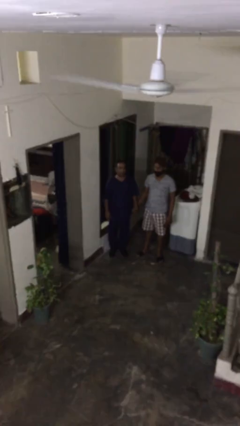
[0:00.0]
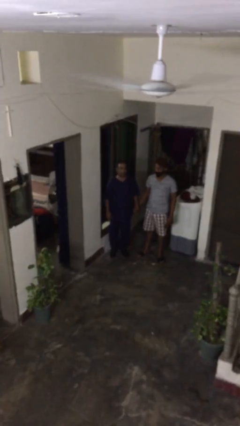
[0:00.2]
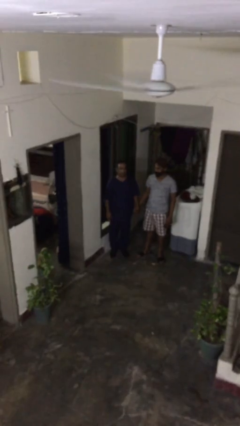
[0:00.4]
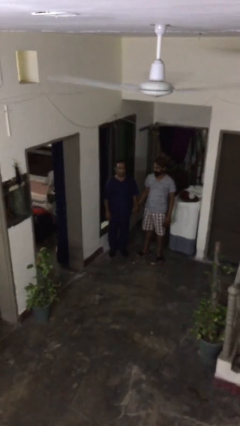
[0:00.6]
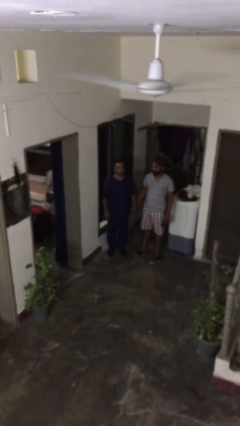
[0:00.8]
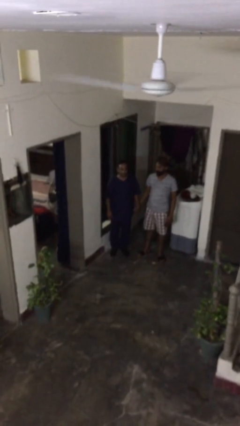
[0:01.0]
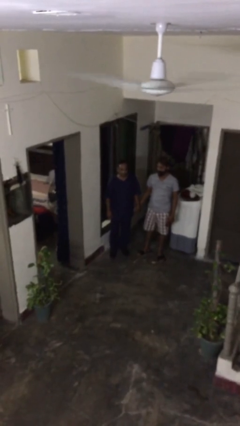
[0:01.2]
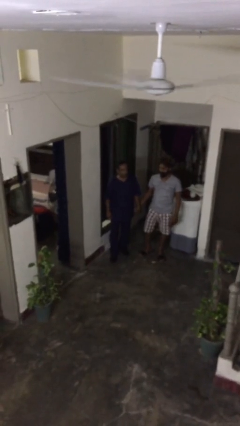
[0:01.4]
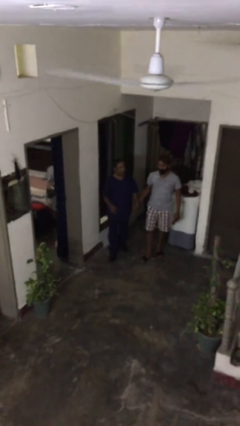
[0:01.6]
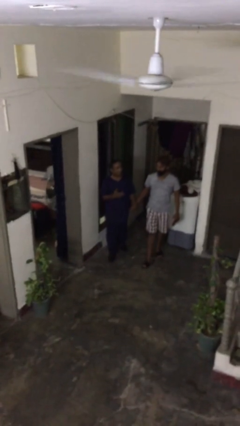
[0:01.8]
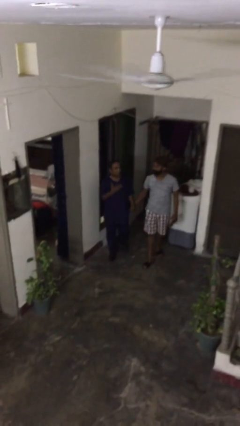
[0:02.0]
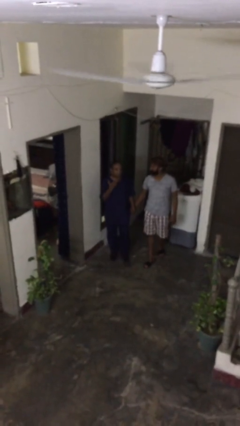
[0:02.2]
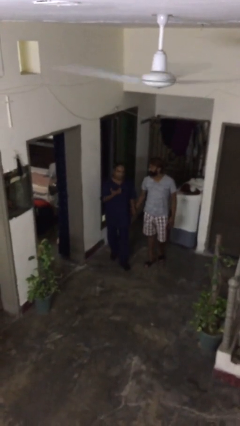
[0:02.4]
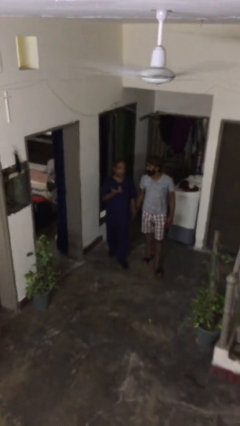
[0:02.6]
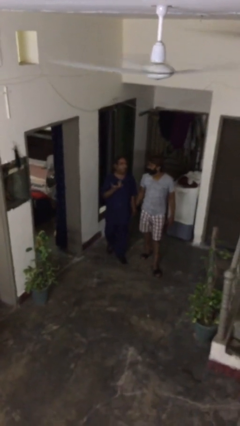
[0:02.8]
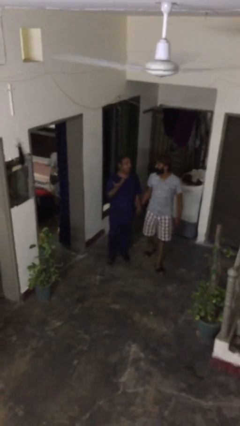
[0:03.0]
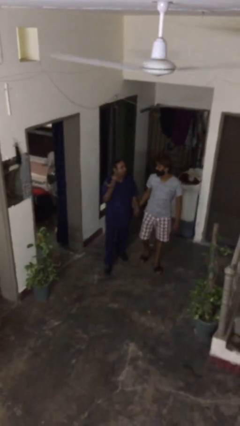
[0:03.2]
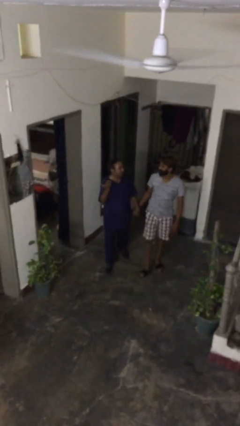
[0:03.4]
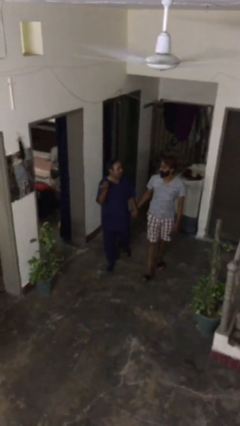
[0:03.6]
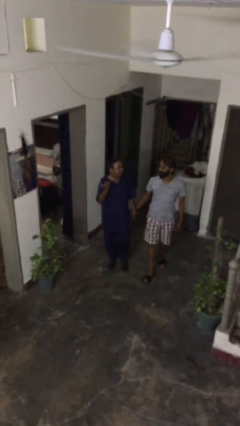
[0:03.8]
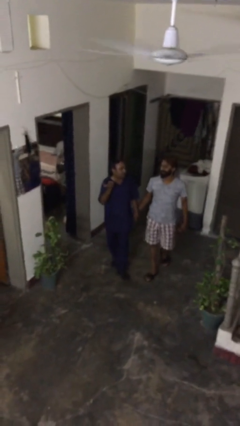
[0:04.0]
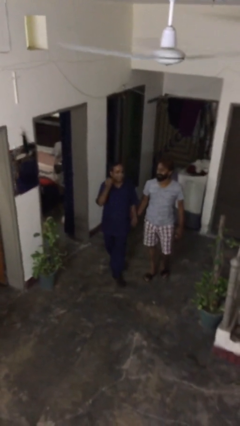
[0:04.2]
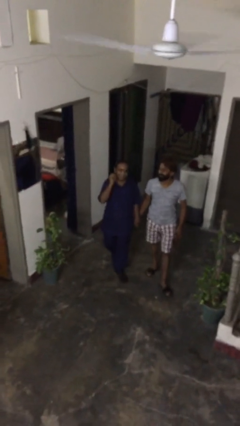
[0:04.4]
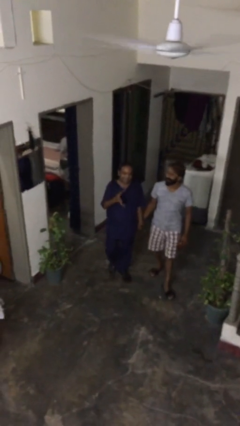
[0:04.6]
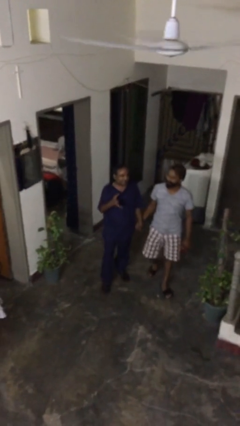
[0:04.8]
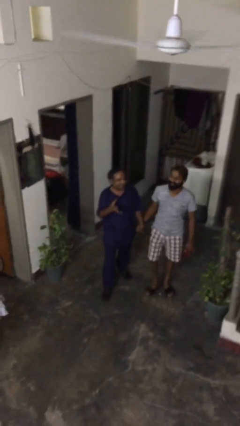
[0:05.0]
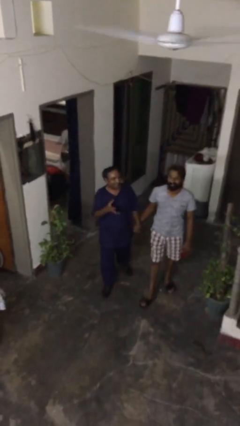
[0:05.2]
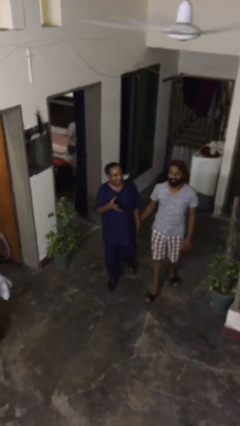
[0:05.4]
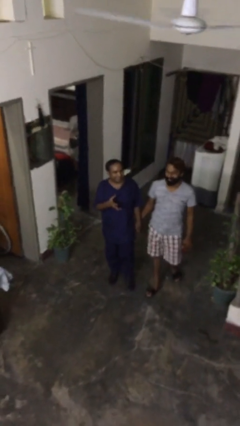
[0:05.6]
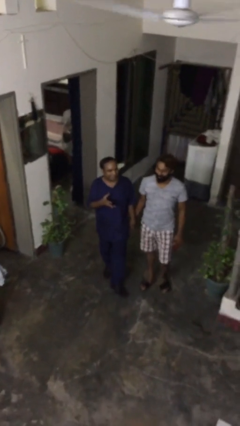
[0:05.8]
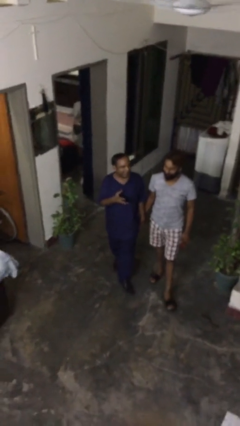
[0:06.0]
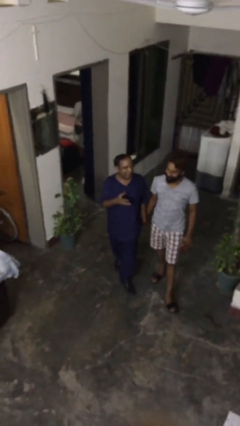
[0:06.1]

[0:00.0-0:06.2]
person holds hand

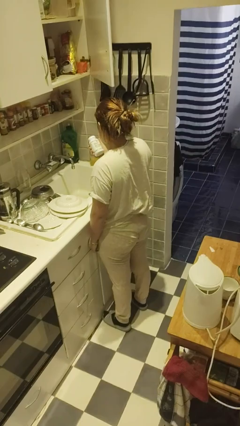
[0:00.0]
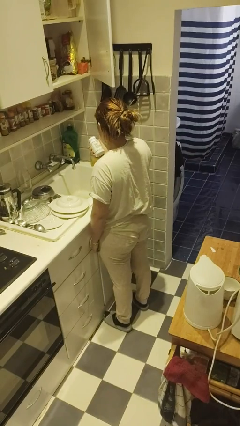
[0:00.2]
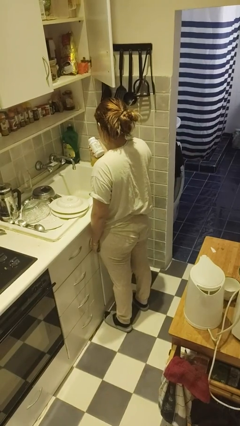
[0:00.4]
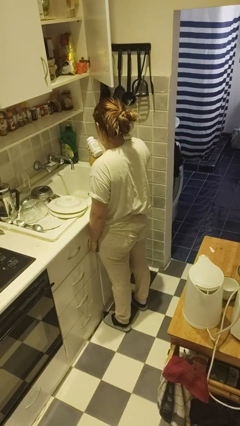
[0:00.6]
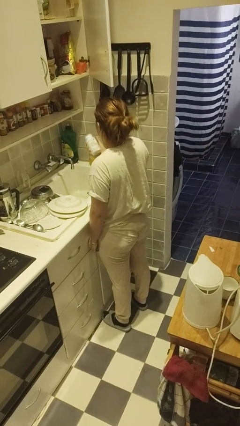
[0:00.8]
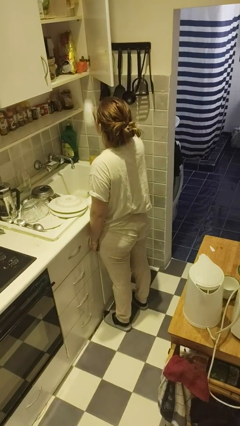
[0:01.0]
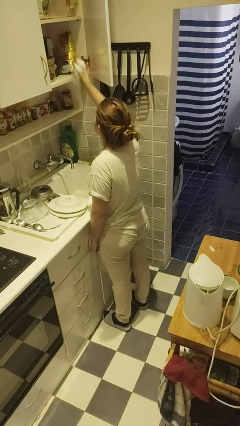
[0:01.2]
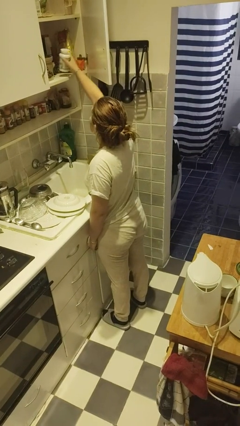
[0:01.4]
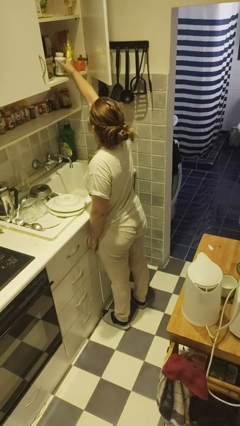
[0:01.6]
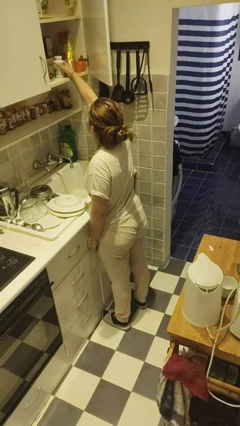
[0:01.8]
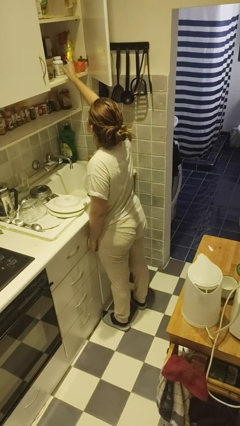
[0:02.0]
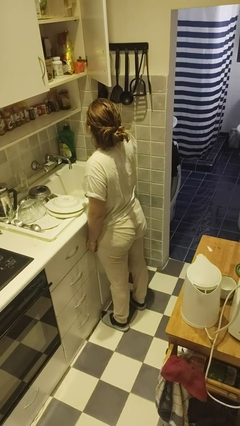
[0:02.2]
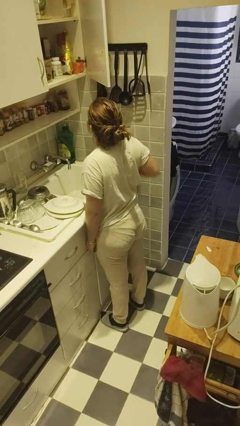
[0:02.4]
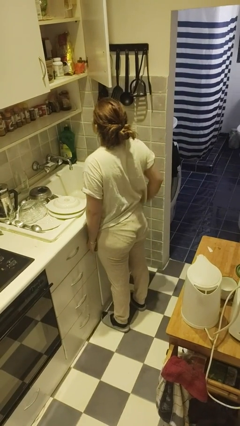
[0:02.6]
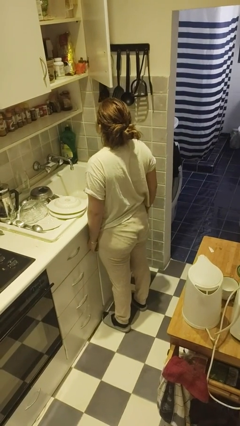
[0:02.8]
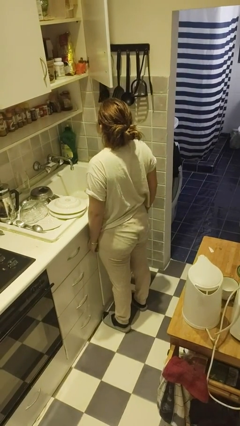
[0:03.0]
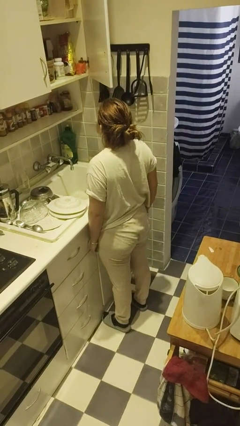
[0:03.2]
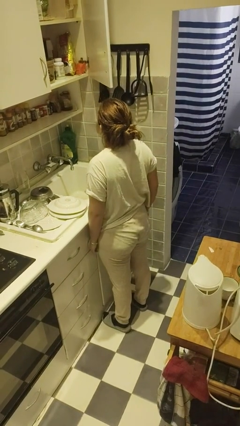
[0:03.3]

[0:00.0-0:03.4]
person puts down object into cabinet

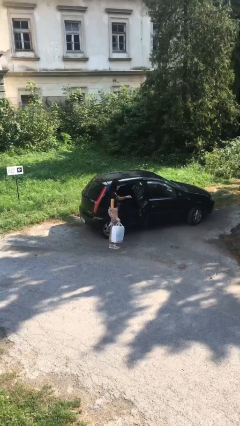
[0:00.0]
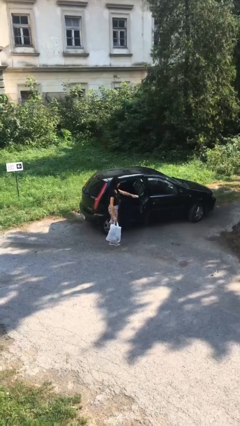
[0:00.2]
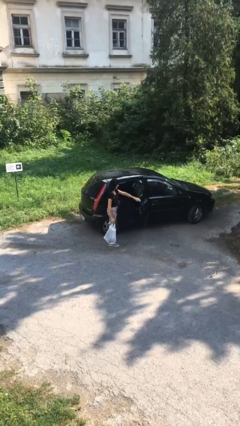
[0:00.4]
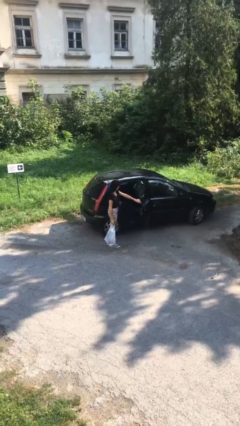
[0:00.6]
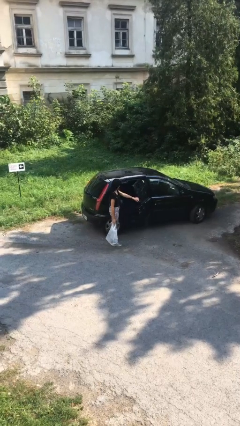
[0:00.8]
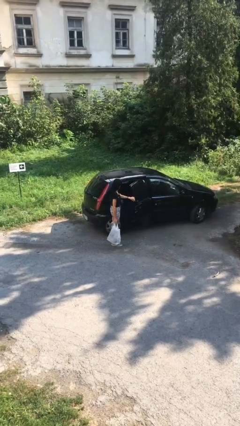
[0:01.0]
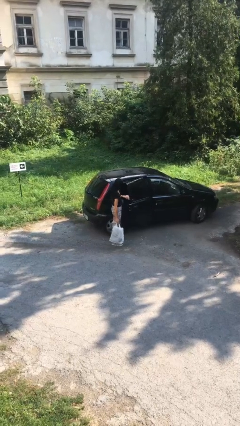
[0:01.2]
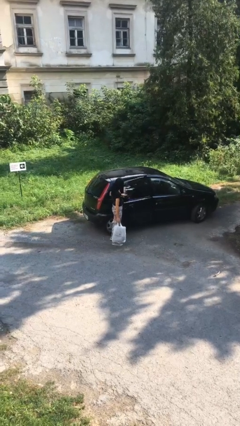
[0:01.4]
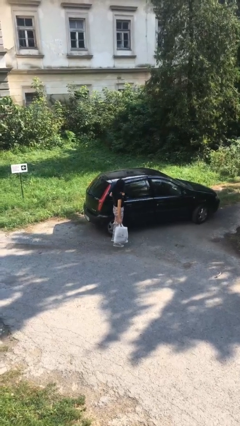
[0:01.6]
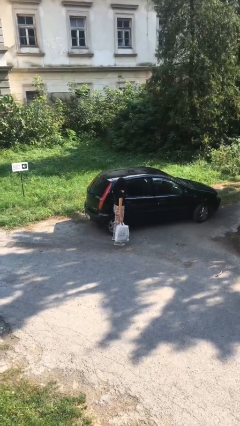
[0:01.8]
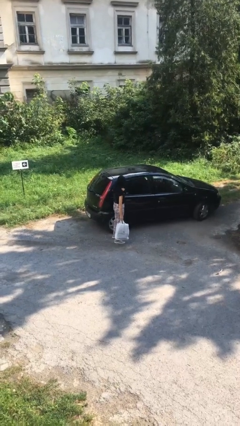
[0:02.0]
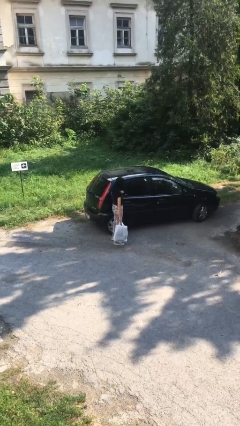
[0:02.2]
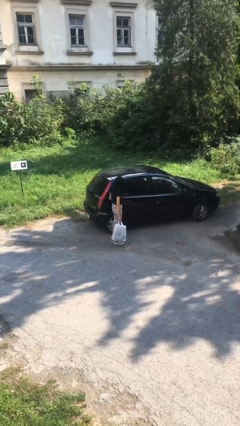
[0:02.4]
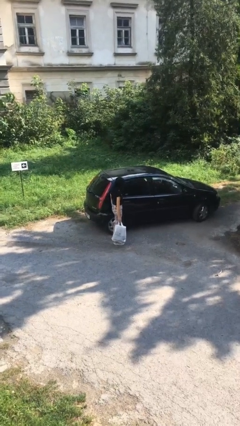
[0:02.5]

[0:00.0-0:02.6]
person closes car door

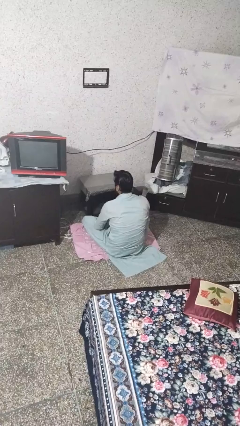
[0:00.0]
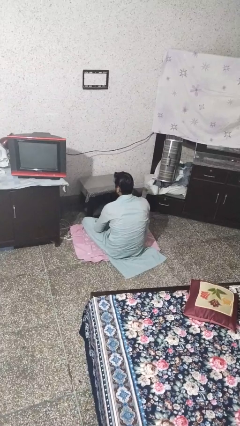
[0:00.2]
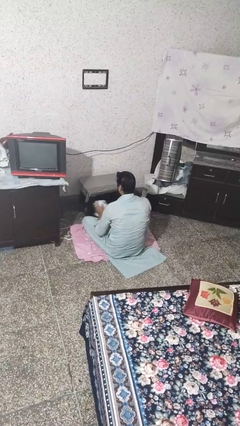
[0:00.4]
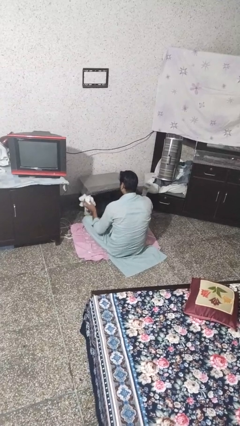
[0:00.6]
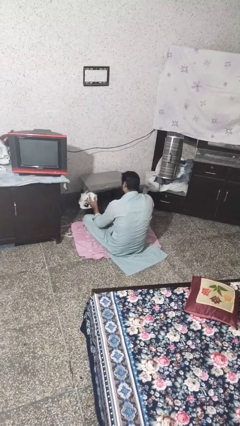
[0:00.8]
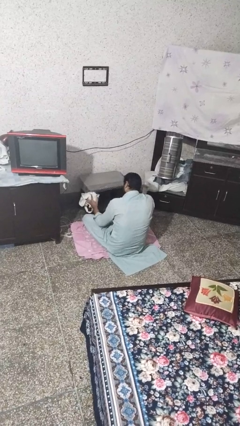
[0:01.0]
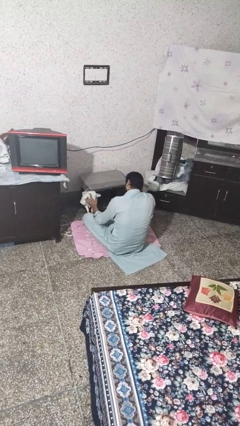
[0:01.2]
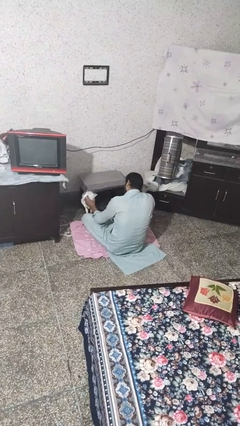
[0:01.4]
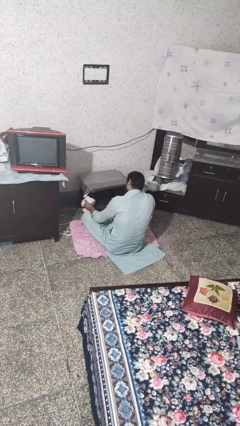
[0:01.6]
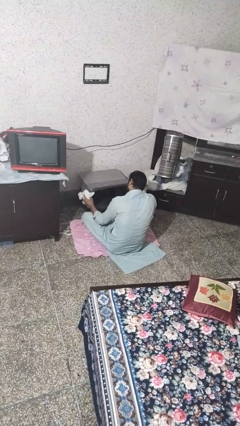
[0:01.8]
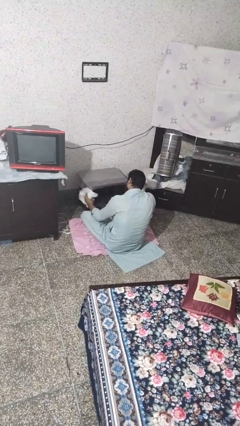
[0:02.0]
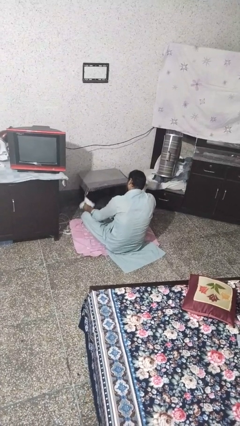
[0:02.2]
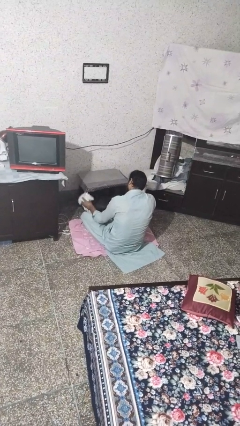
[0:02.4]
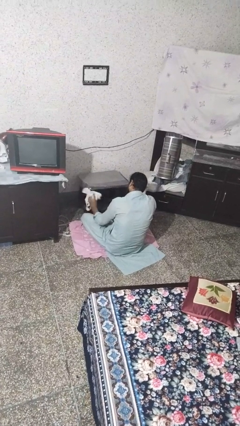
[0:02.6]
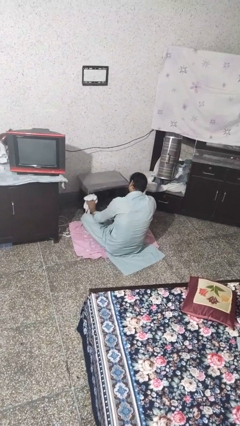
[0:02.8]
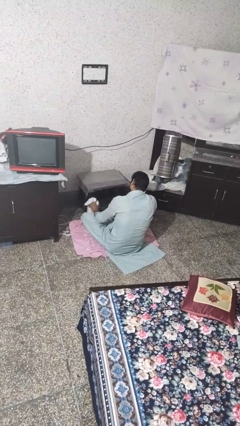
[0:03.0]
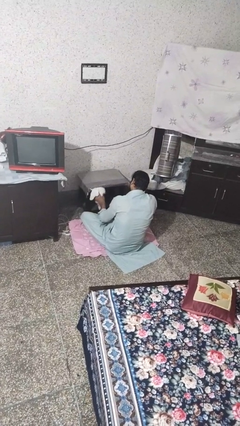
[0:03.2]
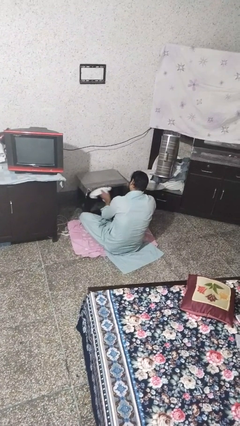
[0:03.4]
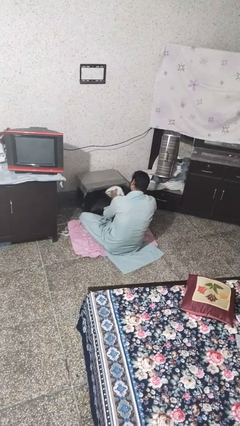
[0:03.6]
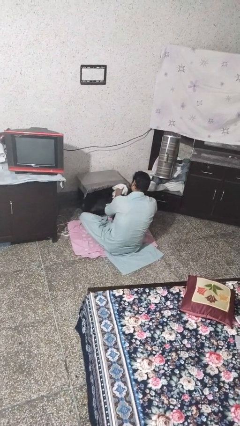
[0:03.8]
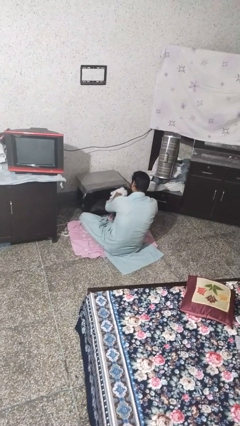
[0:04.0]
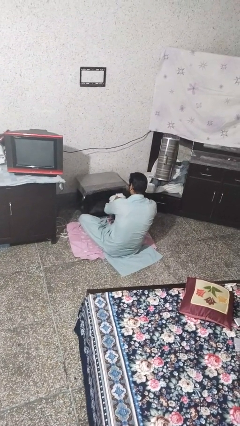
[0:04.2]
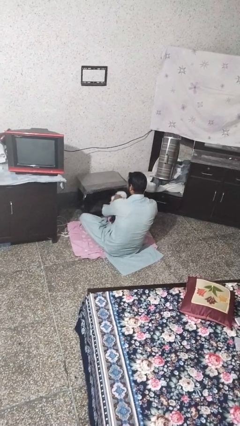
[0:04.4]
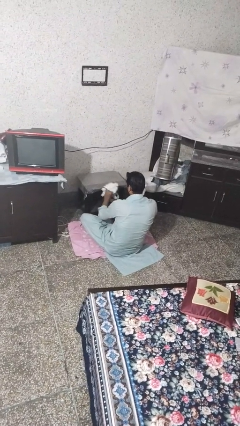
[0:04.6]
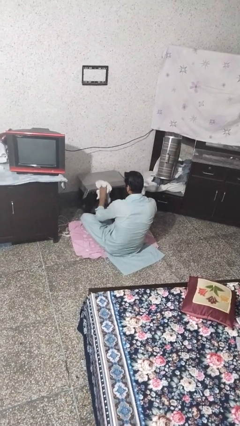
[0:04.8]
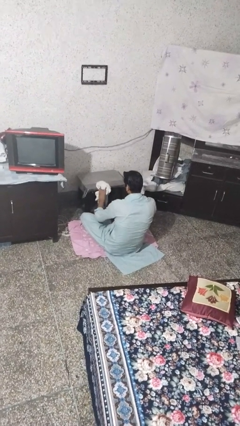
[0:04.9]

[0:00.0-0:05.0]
person cleans table with rag

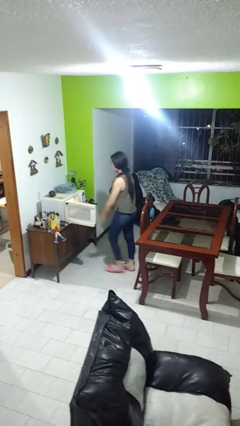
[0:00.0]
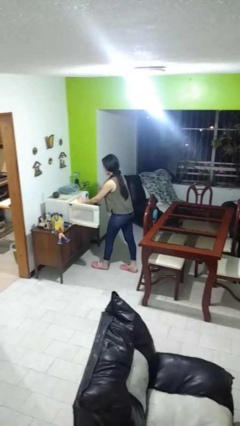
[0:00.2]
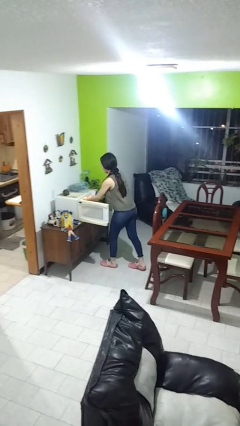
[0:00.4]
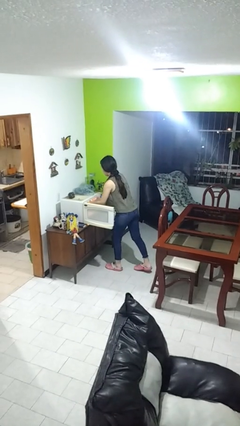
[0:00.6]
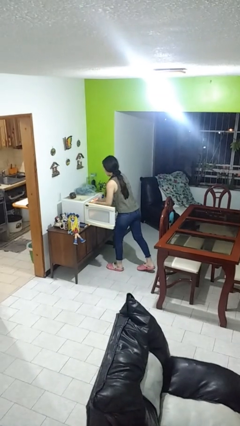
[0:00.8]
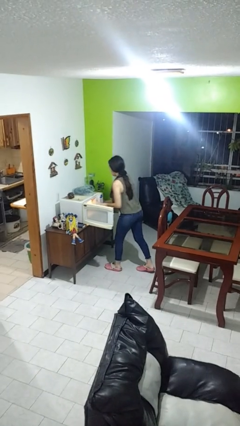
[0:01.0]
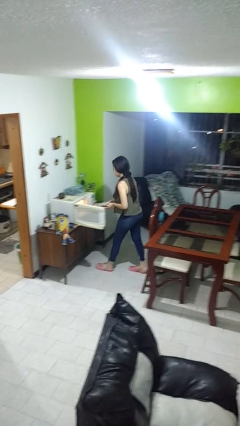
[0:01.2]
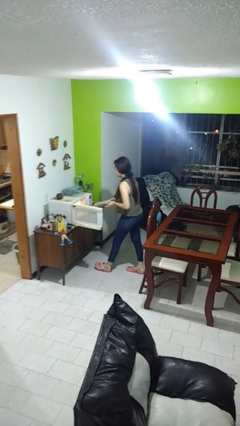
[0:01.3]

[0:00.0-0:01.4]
person takes object from microwave
